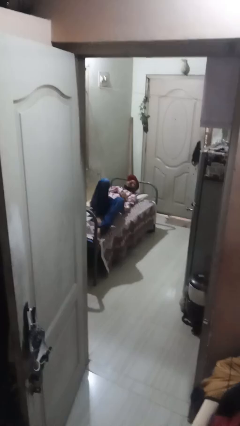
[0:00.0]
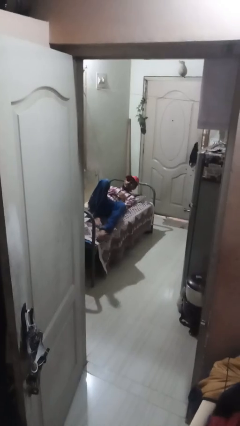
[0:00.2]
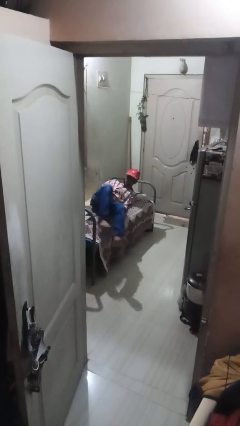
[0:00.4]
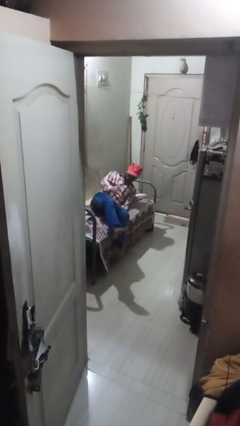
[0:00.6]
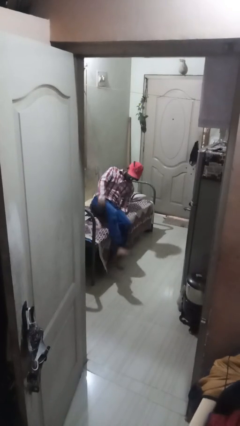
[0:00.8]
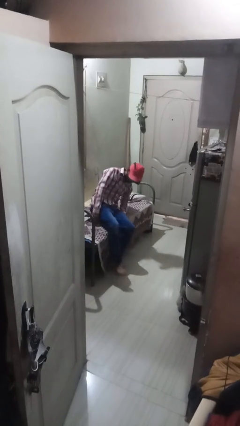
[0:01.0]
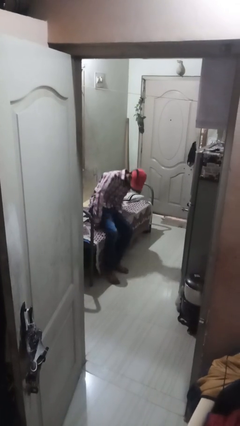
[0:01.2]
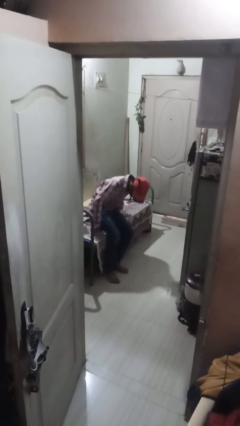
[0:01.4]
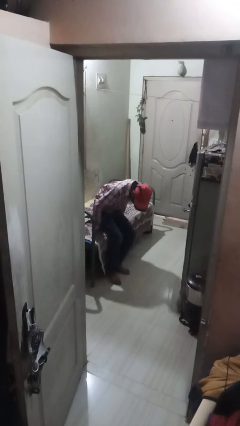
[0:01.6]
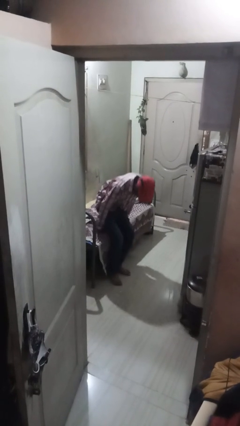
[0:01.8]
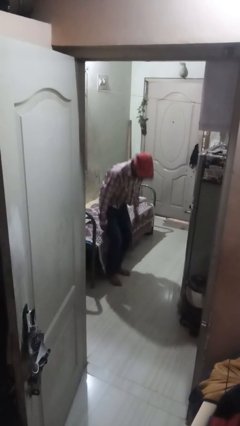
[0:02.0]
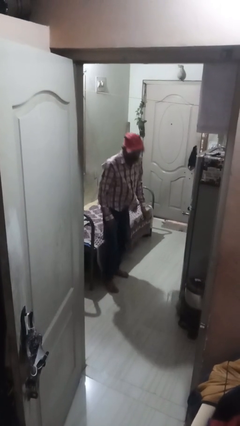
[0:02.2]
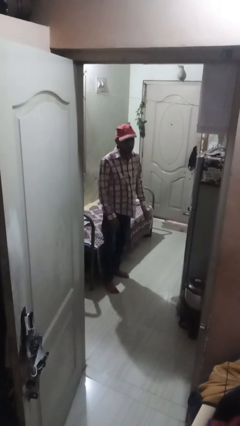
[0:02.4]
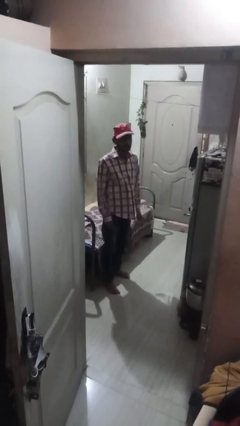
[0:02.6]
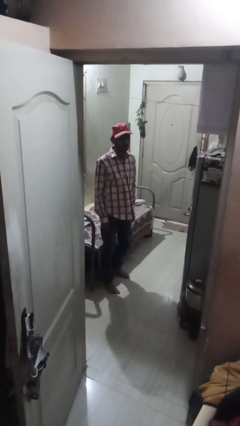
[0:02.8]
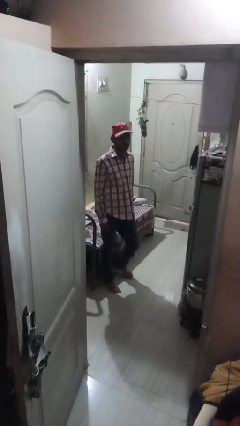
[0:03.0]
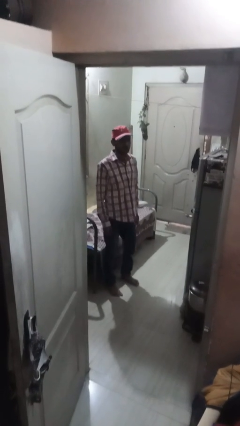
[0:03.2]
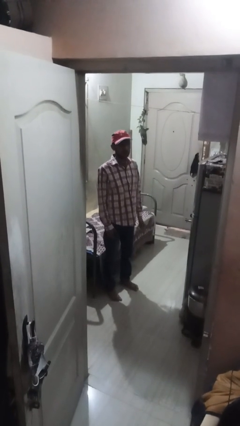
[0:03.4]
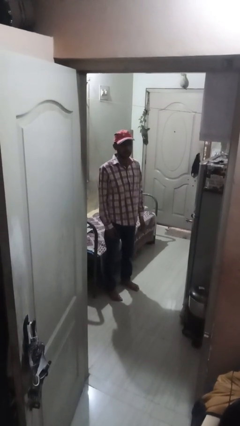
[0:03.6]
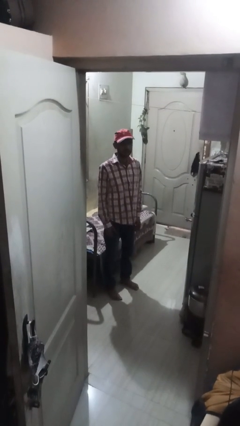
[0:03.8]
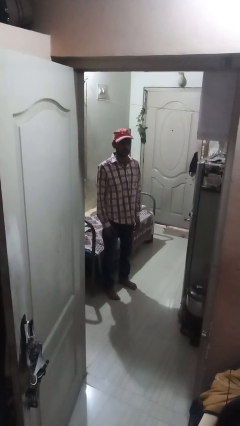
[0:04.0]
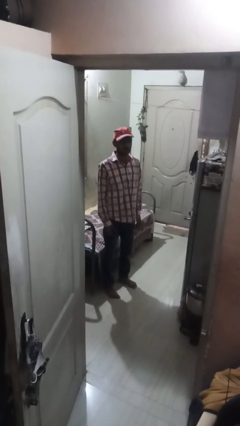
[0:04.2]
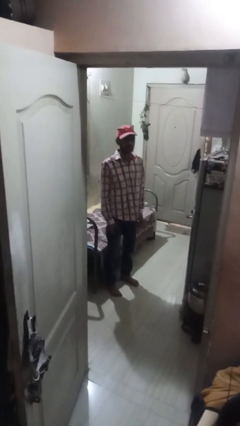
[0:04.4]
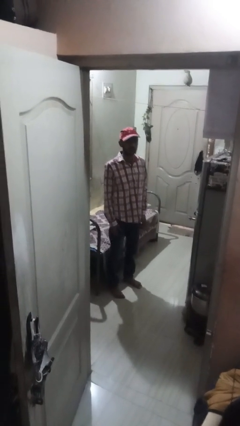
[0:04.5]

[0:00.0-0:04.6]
person stands up

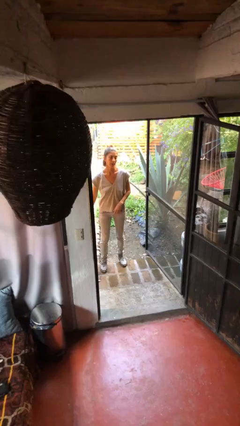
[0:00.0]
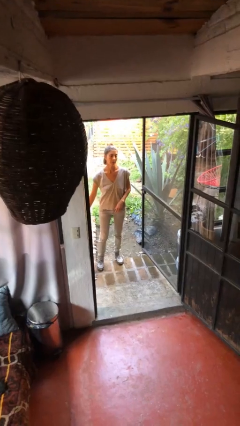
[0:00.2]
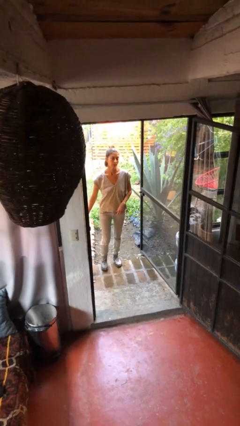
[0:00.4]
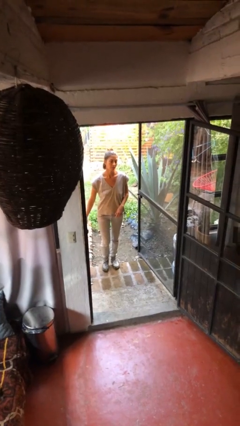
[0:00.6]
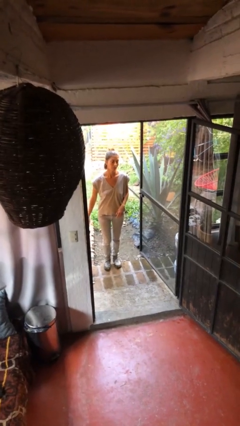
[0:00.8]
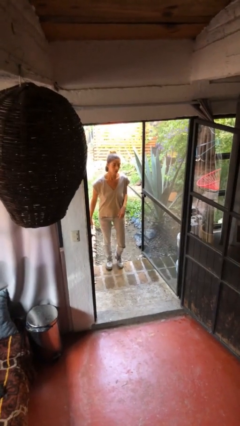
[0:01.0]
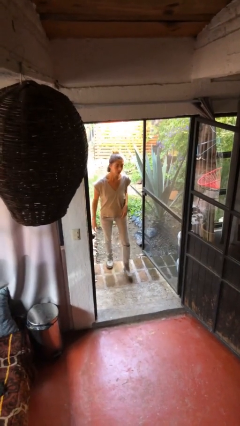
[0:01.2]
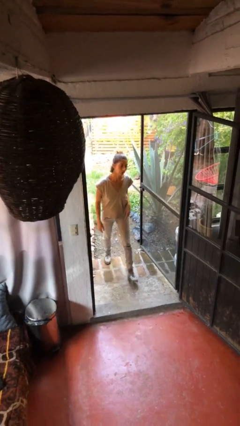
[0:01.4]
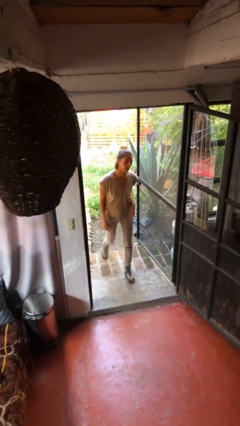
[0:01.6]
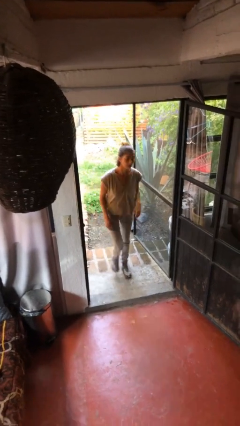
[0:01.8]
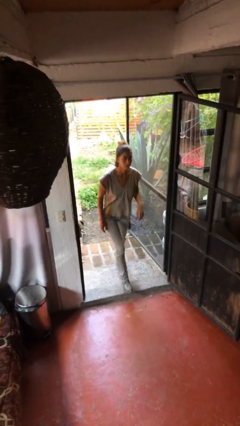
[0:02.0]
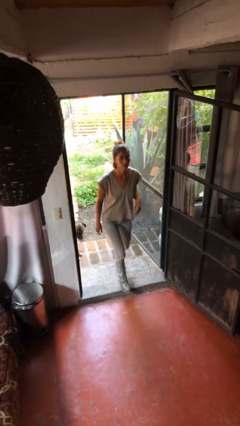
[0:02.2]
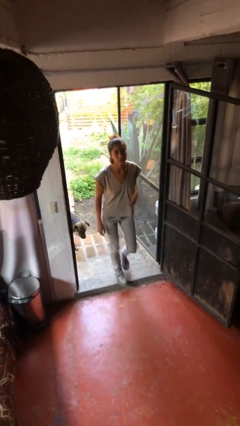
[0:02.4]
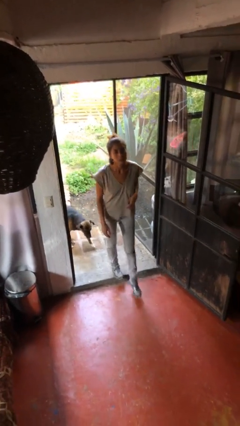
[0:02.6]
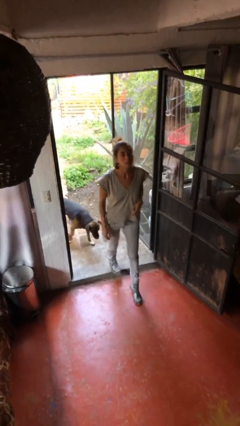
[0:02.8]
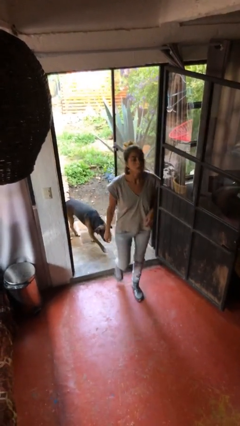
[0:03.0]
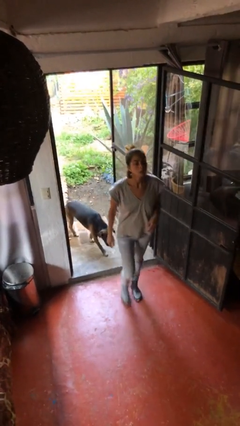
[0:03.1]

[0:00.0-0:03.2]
person enters scene through structure

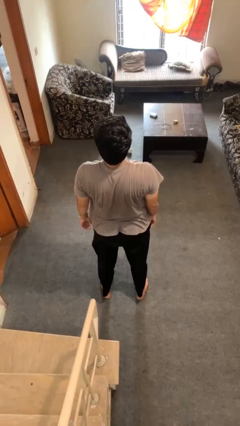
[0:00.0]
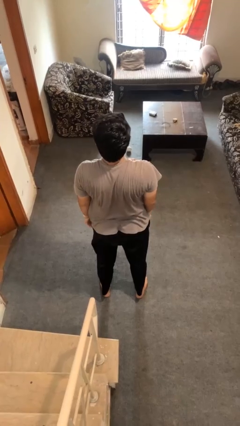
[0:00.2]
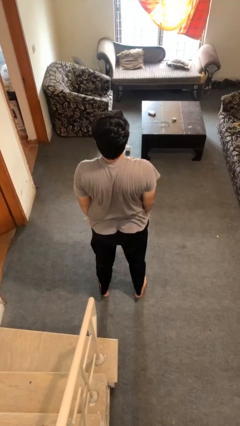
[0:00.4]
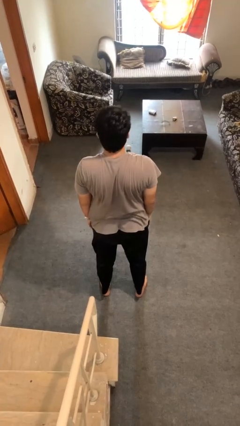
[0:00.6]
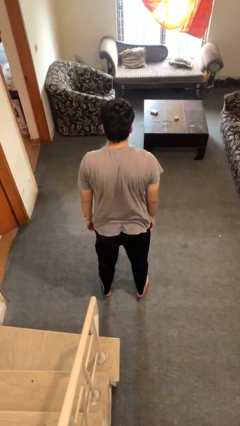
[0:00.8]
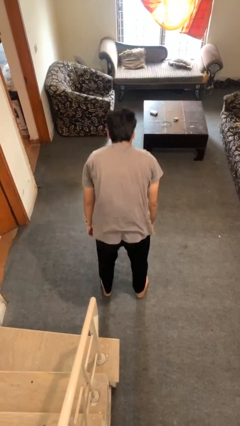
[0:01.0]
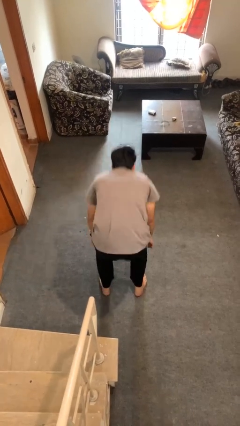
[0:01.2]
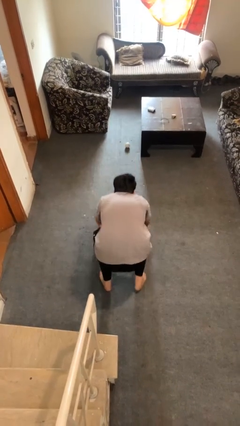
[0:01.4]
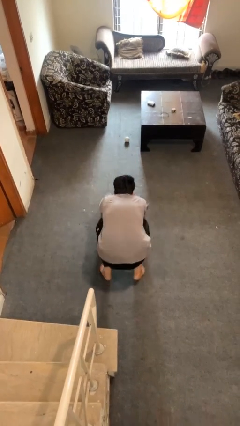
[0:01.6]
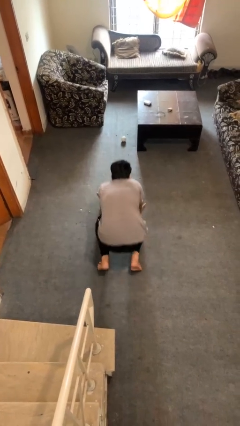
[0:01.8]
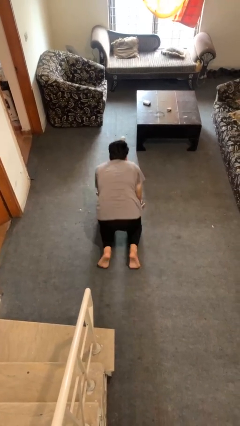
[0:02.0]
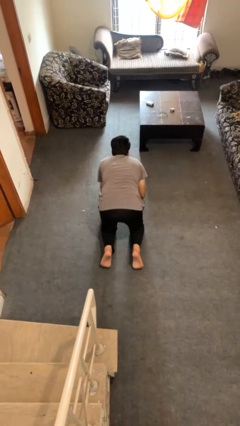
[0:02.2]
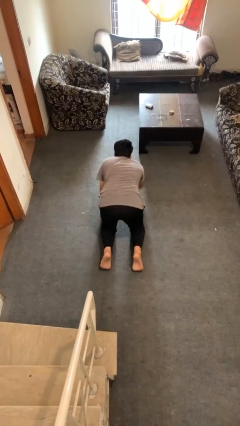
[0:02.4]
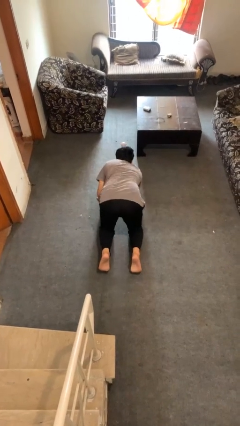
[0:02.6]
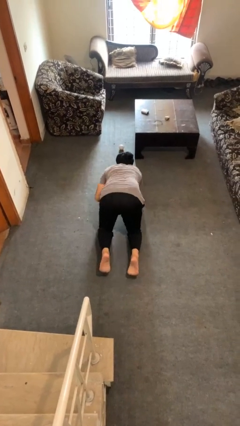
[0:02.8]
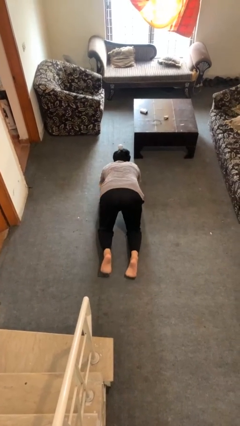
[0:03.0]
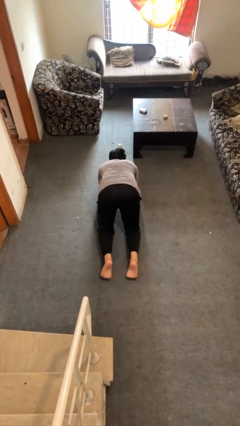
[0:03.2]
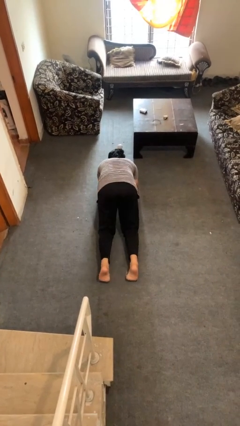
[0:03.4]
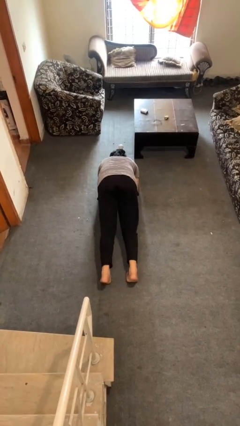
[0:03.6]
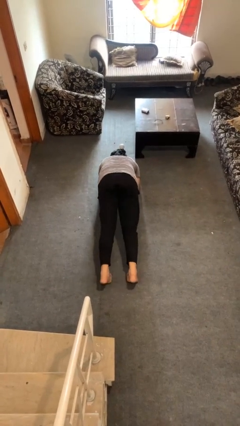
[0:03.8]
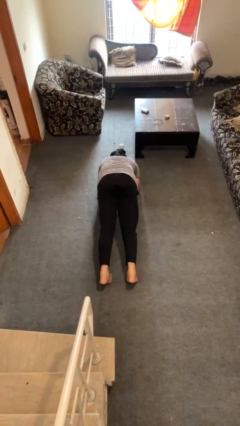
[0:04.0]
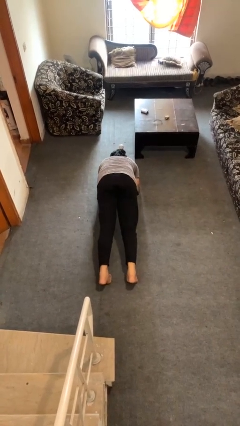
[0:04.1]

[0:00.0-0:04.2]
person exercises with plank

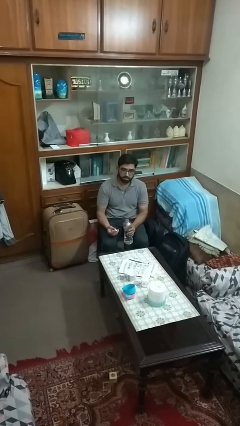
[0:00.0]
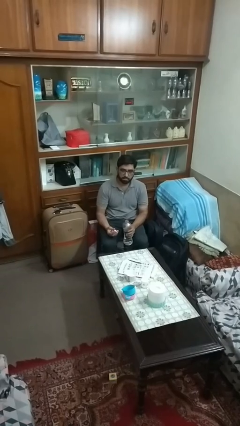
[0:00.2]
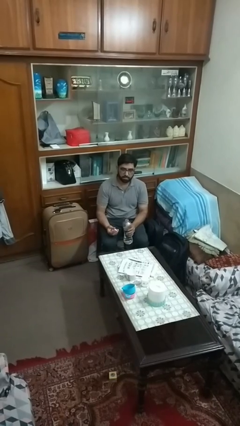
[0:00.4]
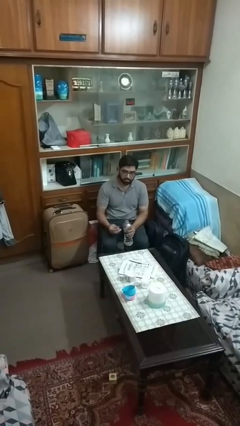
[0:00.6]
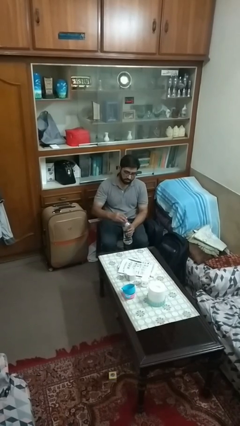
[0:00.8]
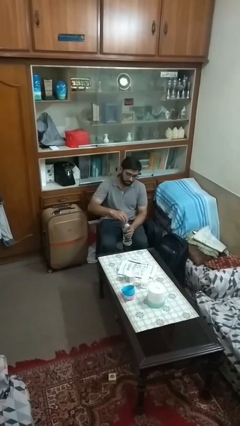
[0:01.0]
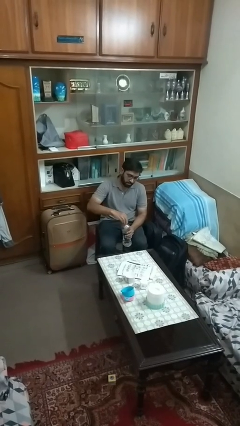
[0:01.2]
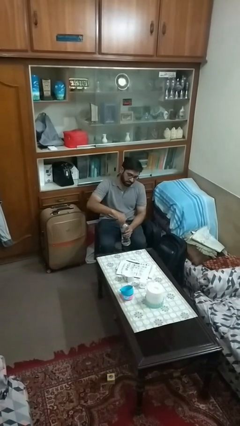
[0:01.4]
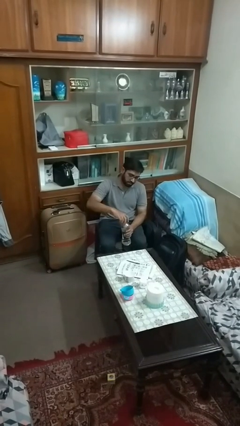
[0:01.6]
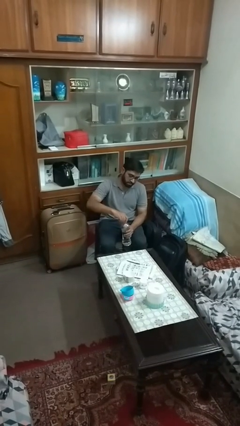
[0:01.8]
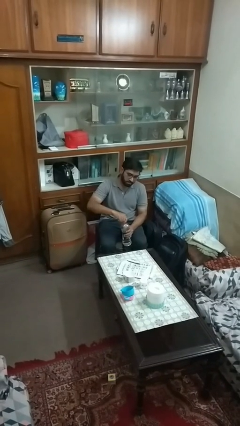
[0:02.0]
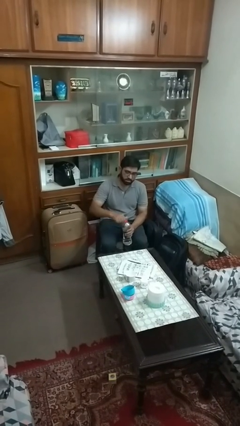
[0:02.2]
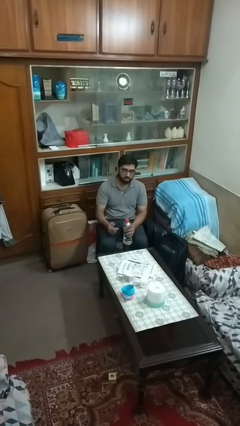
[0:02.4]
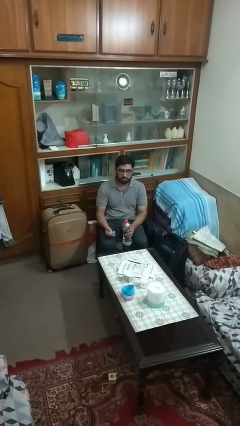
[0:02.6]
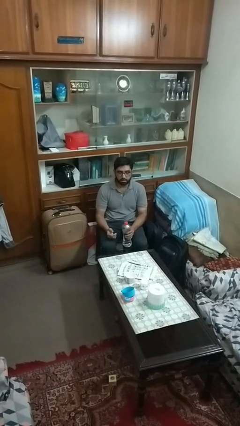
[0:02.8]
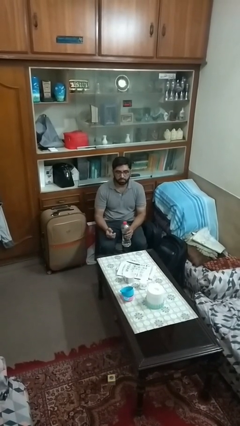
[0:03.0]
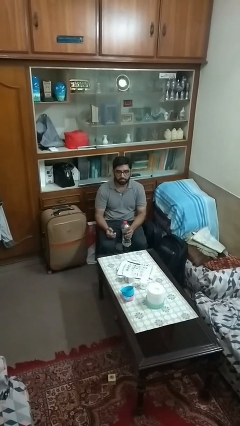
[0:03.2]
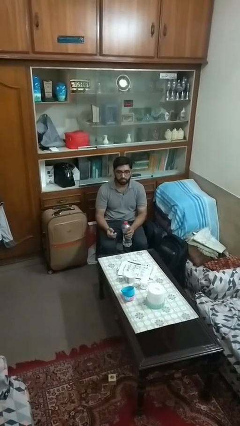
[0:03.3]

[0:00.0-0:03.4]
person screws lid to bottle

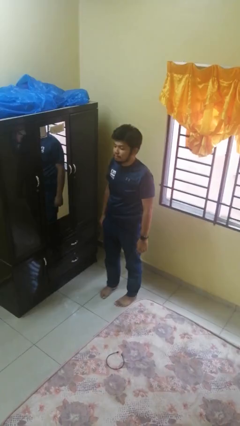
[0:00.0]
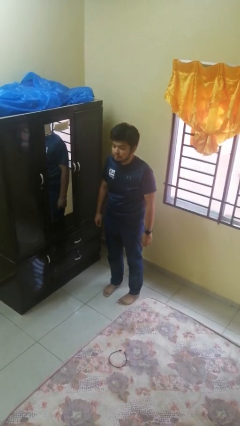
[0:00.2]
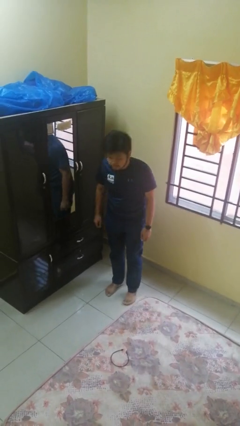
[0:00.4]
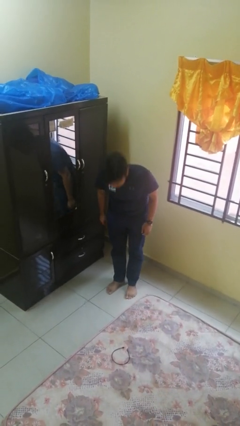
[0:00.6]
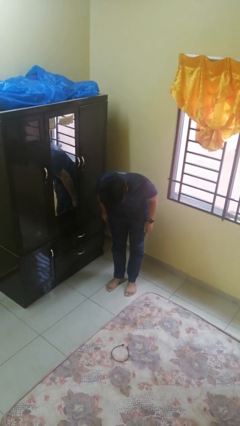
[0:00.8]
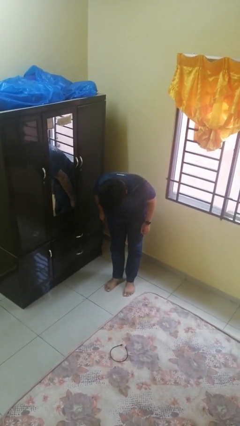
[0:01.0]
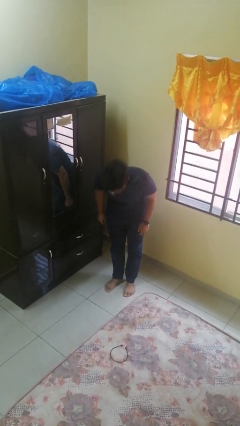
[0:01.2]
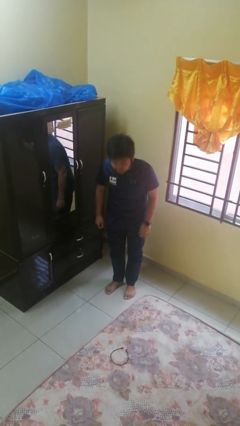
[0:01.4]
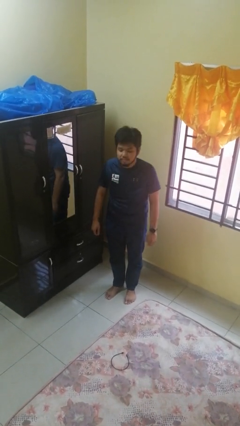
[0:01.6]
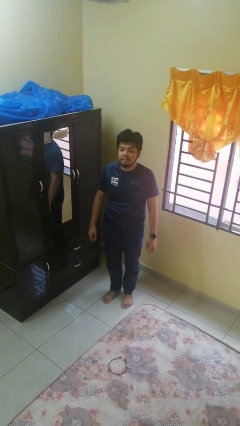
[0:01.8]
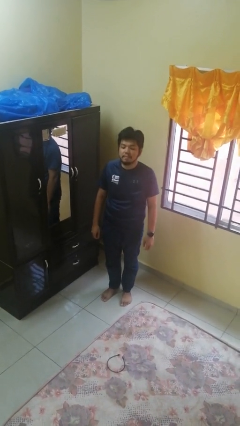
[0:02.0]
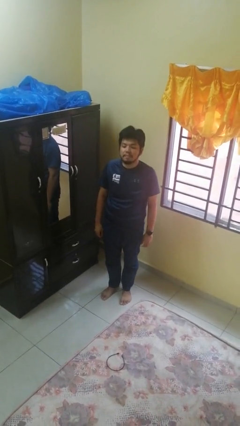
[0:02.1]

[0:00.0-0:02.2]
person bows
